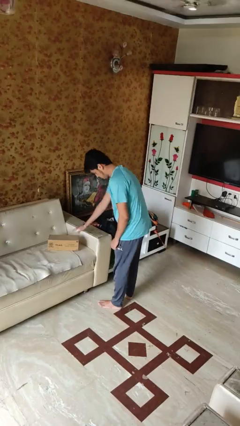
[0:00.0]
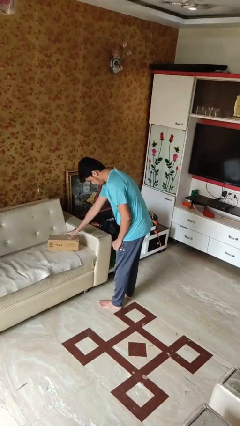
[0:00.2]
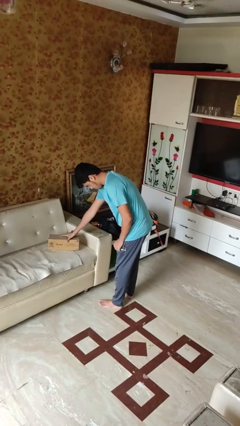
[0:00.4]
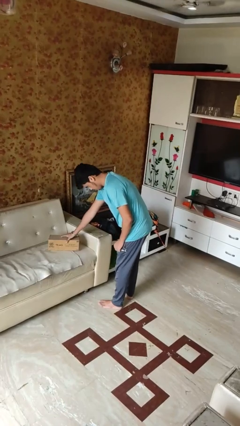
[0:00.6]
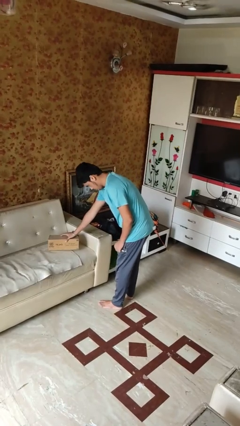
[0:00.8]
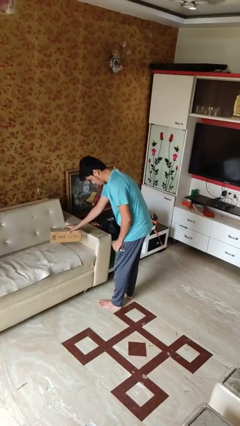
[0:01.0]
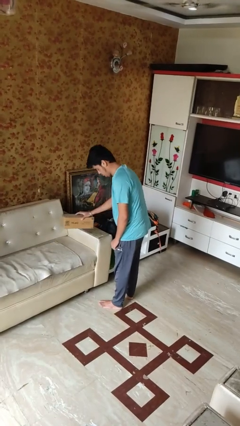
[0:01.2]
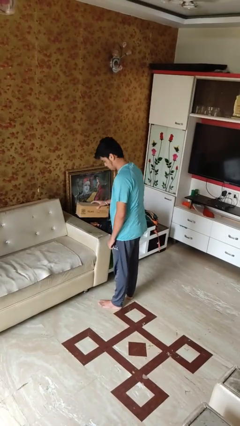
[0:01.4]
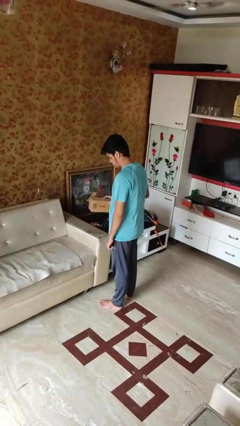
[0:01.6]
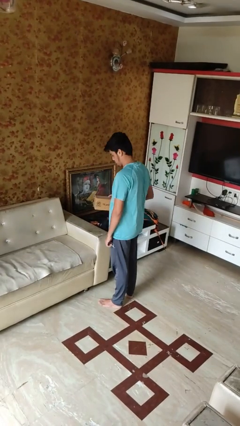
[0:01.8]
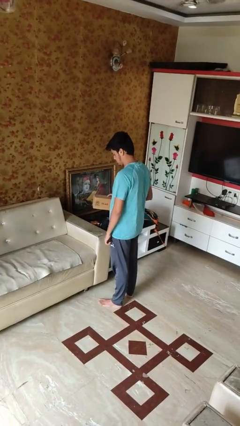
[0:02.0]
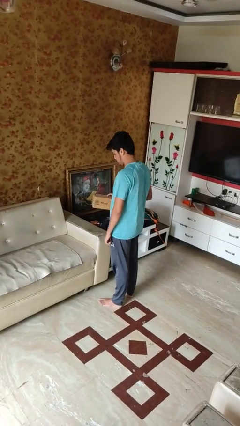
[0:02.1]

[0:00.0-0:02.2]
person picks up object from couch

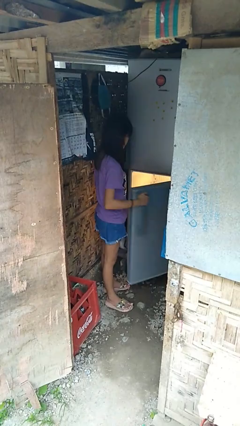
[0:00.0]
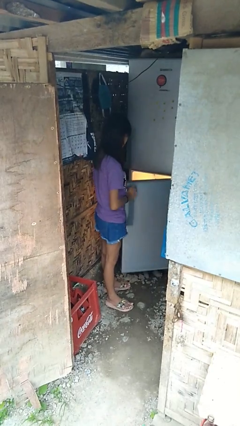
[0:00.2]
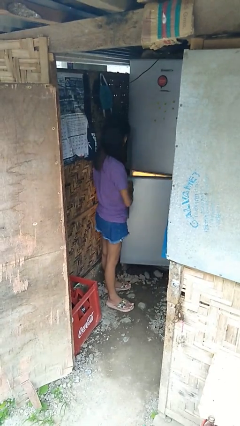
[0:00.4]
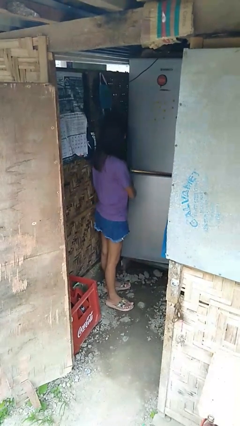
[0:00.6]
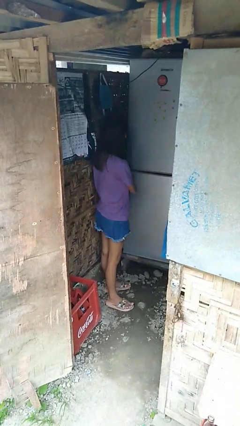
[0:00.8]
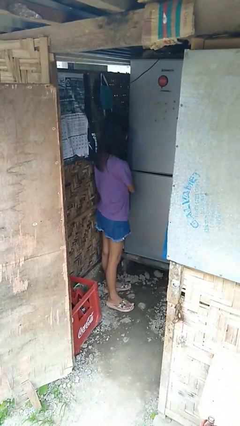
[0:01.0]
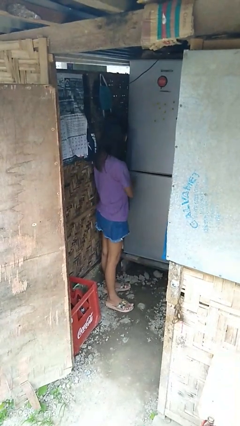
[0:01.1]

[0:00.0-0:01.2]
person closes refrigerator

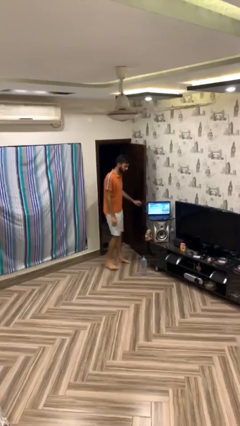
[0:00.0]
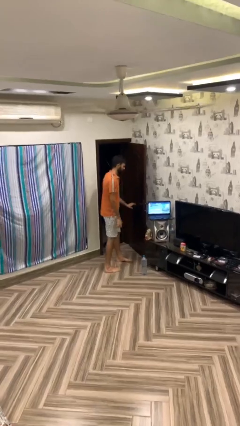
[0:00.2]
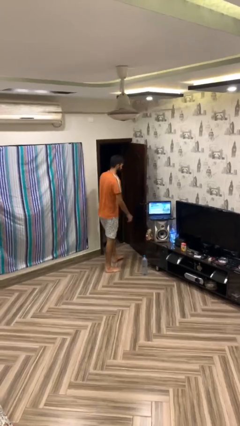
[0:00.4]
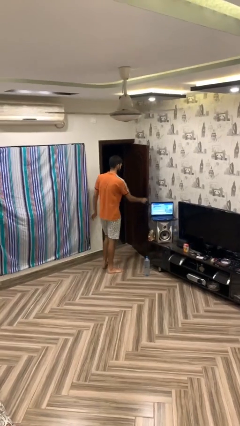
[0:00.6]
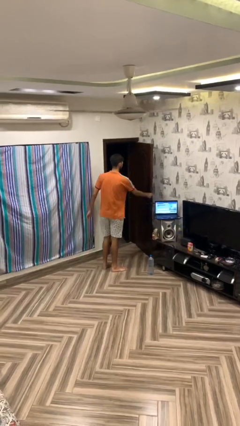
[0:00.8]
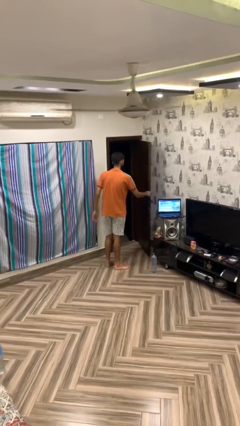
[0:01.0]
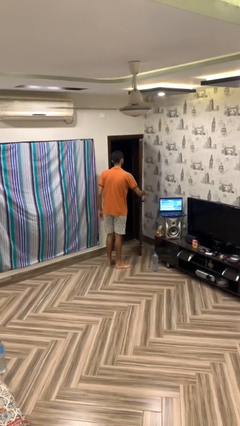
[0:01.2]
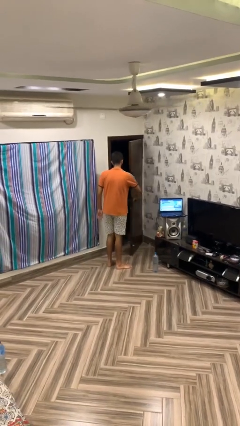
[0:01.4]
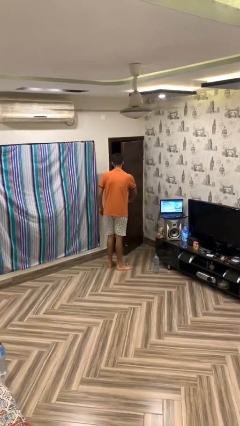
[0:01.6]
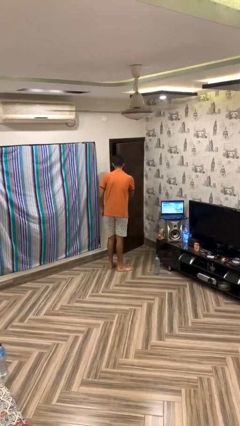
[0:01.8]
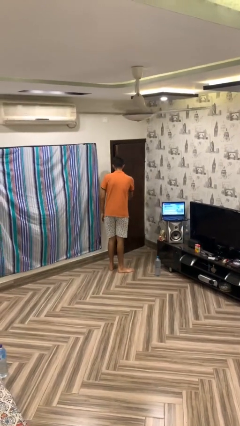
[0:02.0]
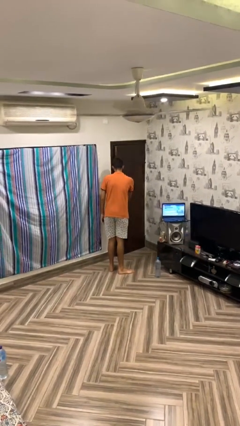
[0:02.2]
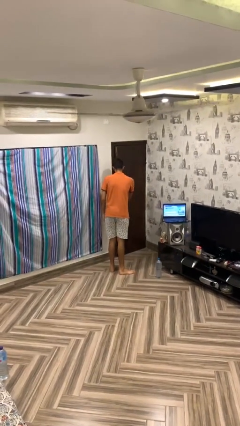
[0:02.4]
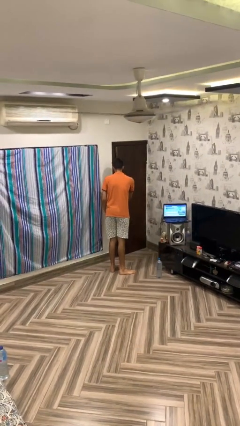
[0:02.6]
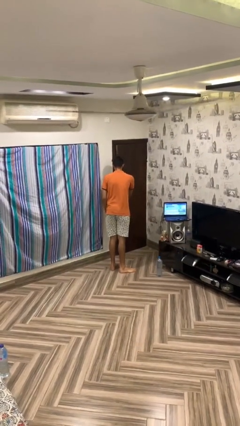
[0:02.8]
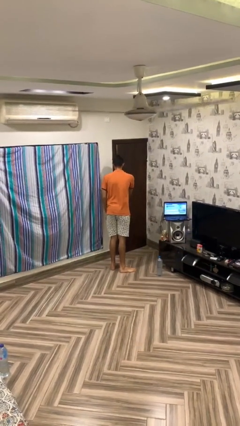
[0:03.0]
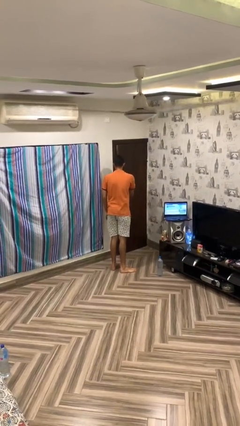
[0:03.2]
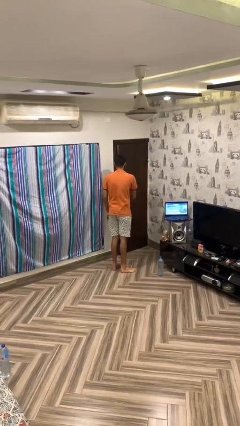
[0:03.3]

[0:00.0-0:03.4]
person closes facility door

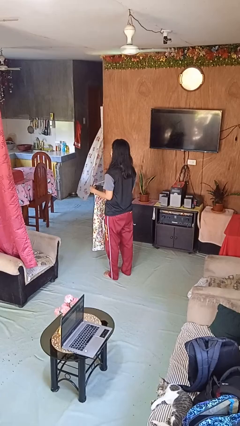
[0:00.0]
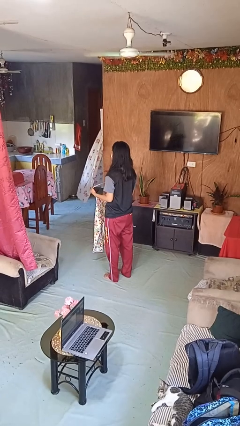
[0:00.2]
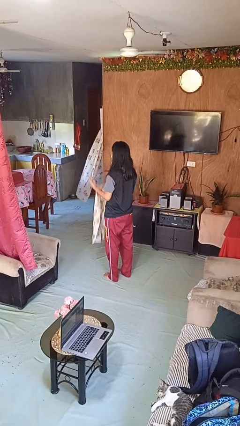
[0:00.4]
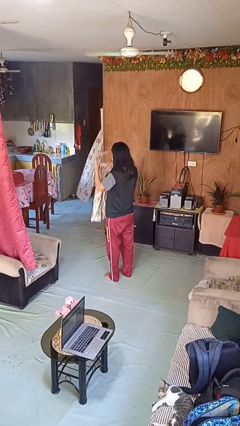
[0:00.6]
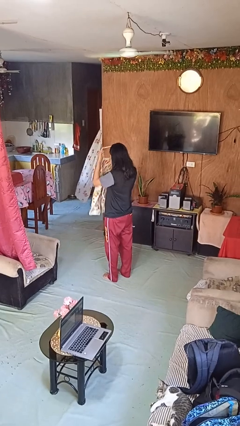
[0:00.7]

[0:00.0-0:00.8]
person puts on apron

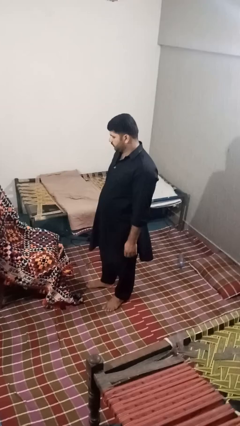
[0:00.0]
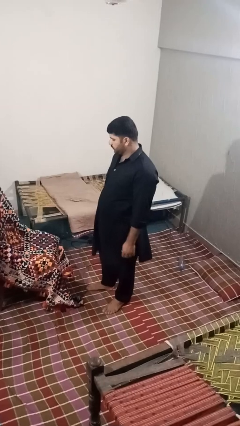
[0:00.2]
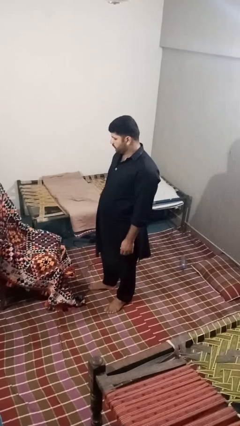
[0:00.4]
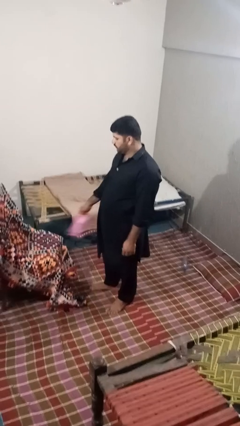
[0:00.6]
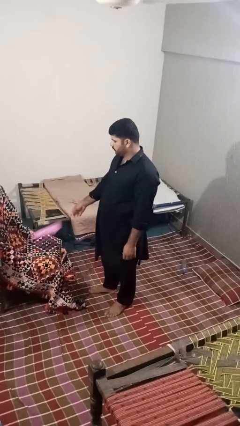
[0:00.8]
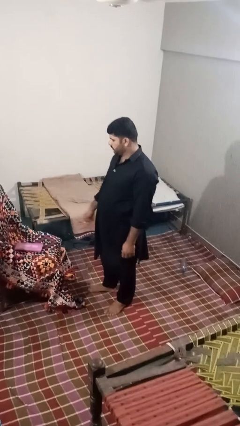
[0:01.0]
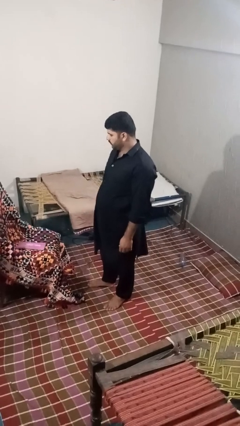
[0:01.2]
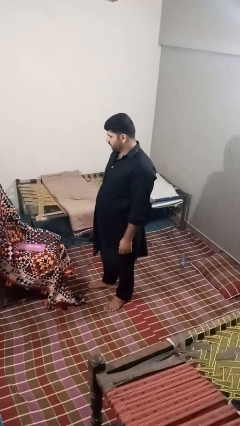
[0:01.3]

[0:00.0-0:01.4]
person puts down object on couch

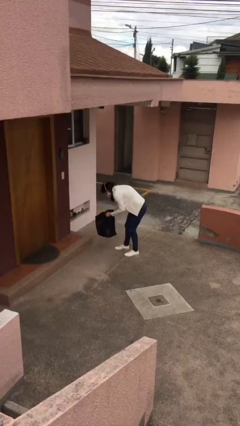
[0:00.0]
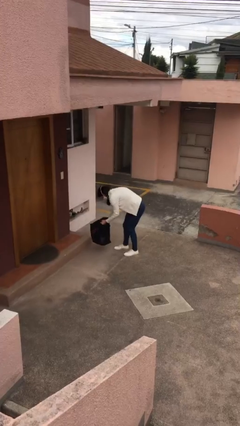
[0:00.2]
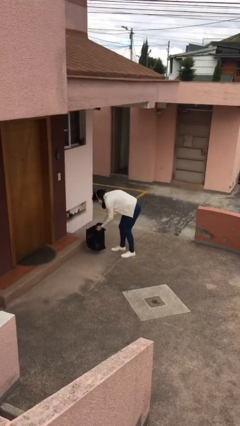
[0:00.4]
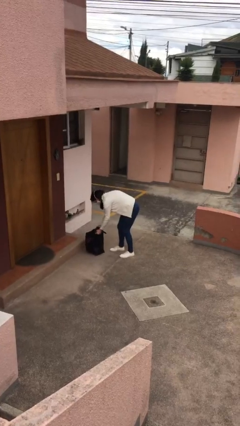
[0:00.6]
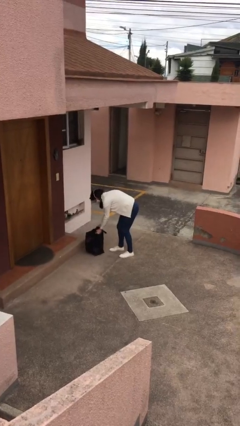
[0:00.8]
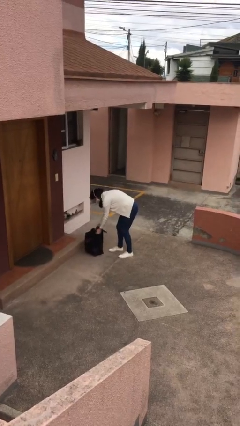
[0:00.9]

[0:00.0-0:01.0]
person puts down object on floor

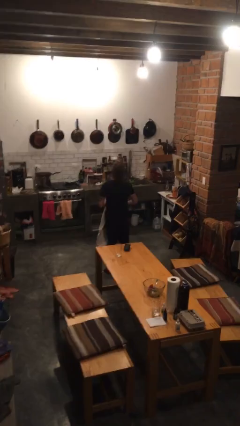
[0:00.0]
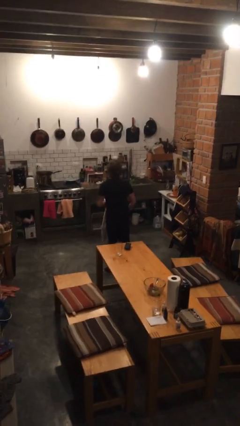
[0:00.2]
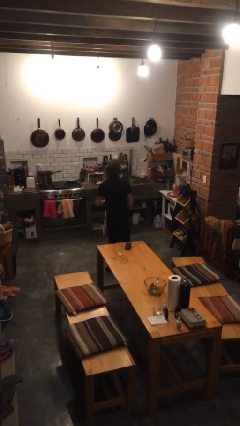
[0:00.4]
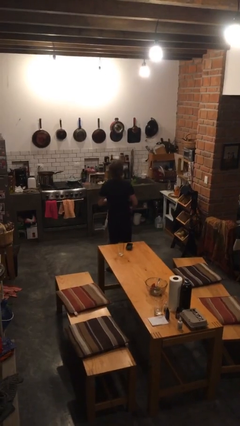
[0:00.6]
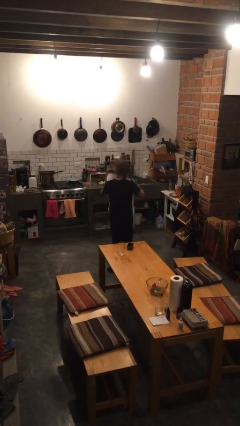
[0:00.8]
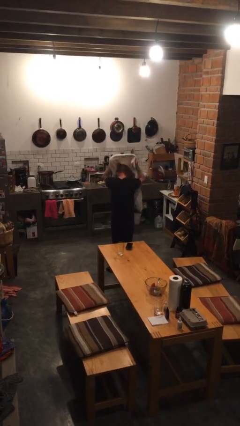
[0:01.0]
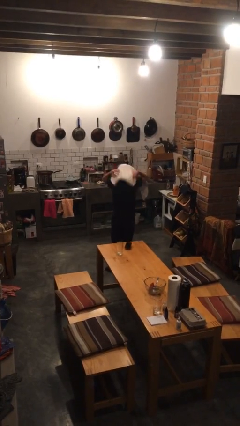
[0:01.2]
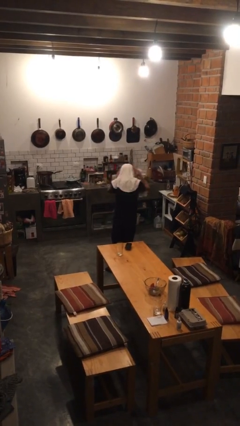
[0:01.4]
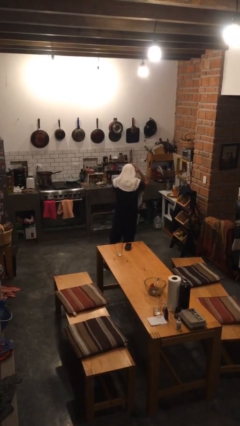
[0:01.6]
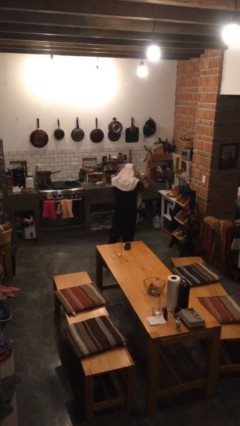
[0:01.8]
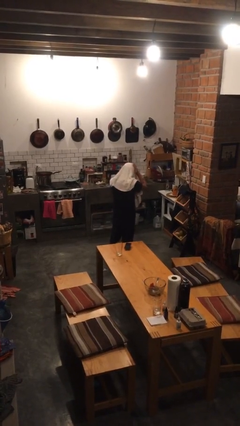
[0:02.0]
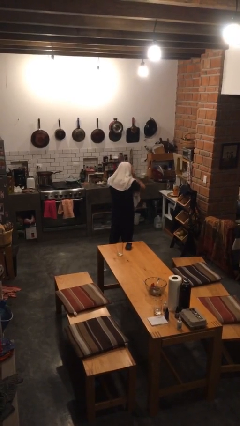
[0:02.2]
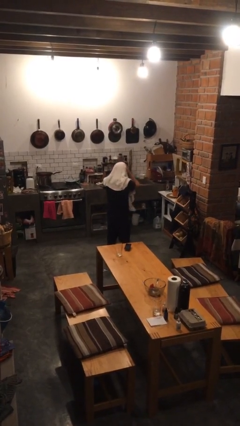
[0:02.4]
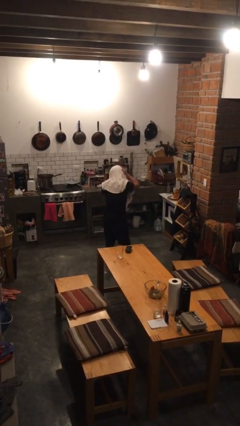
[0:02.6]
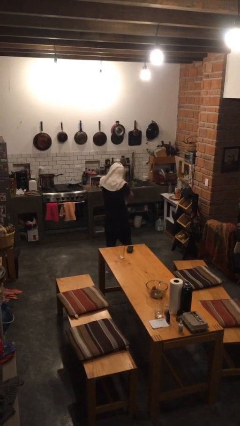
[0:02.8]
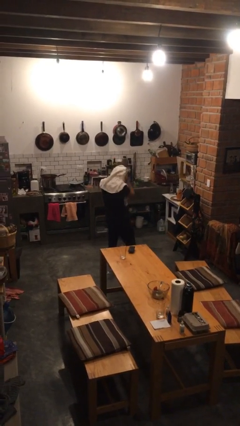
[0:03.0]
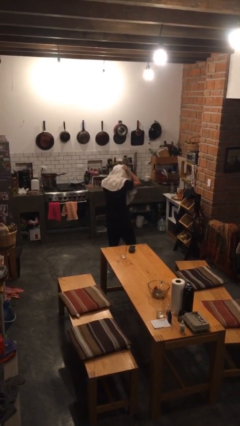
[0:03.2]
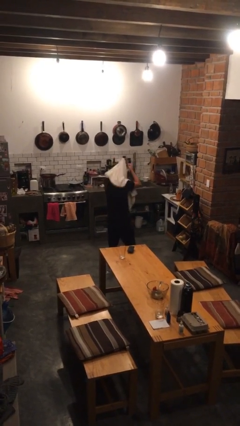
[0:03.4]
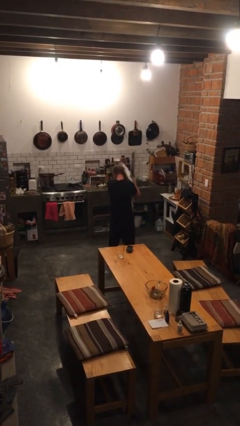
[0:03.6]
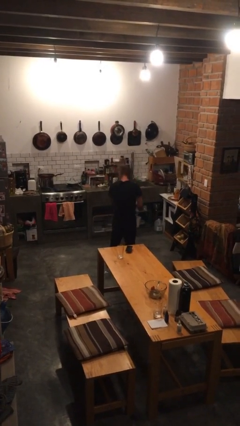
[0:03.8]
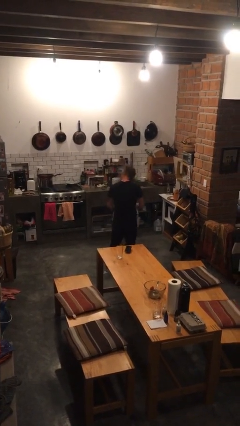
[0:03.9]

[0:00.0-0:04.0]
person dries hair with towel

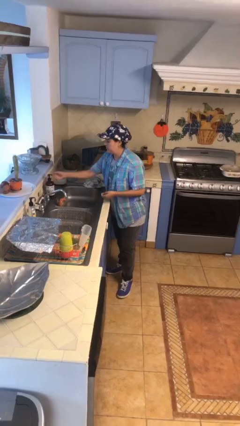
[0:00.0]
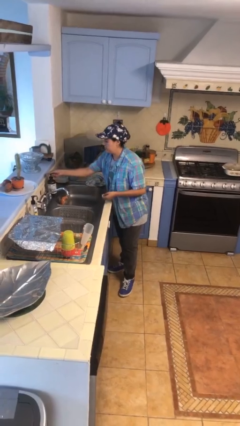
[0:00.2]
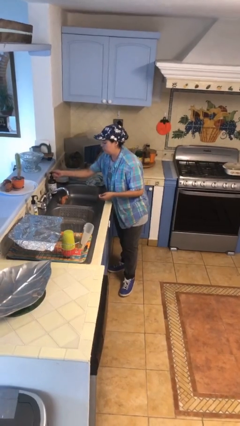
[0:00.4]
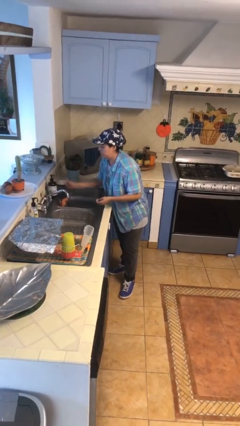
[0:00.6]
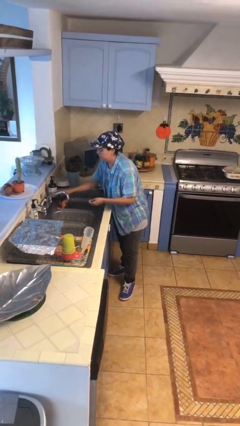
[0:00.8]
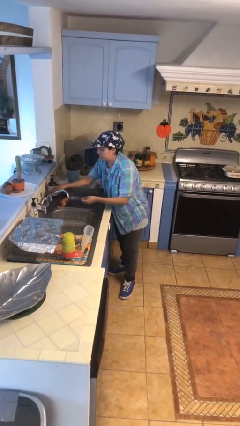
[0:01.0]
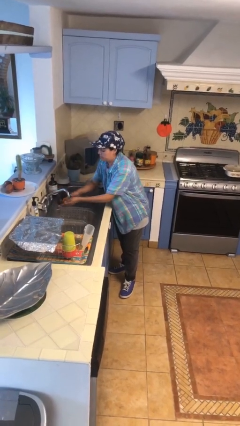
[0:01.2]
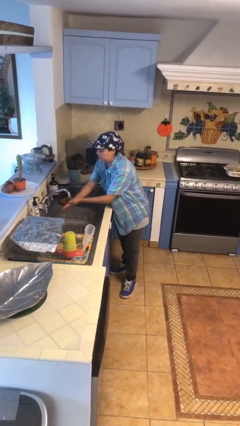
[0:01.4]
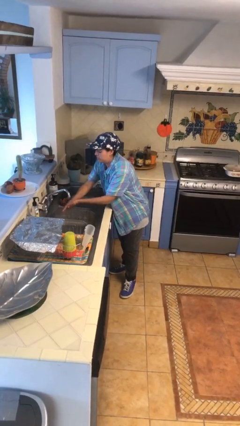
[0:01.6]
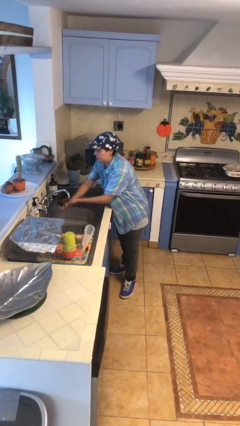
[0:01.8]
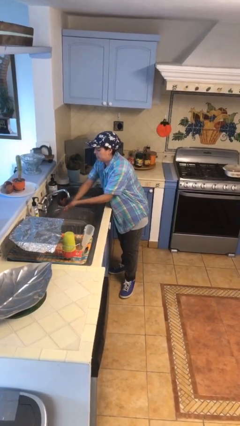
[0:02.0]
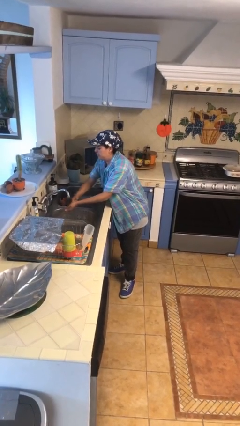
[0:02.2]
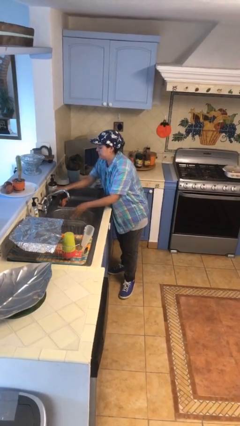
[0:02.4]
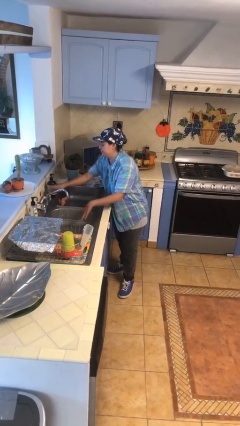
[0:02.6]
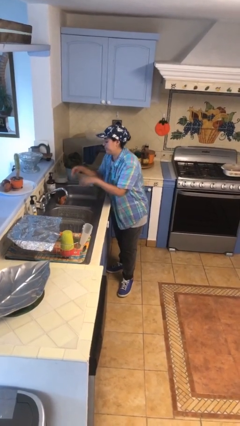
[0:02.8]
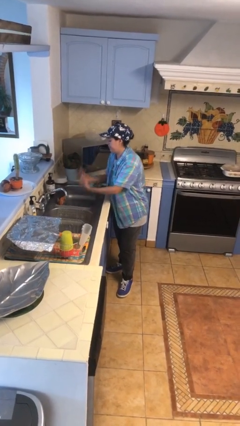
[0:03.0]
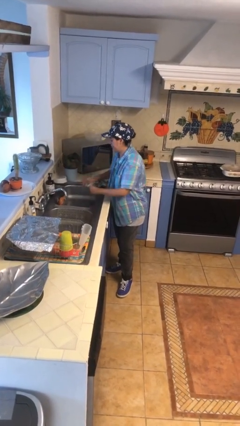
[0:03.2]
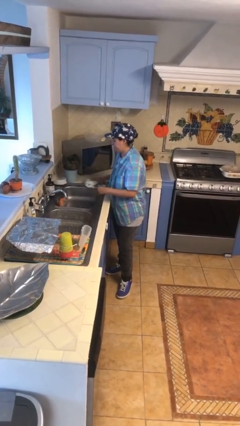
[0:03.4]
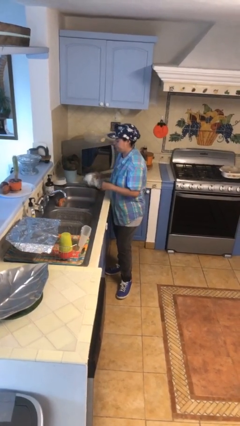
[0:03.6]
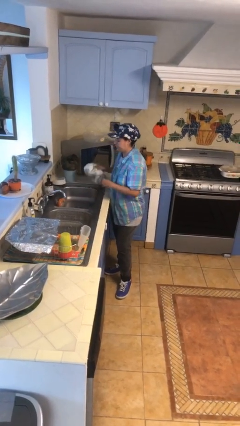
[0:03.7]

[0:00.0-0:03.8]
person washes hands
